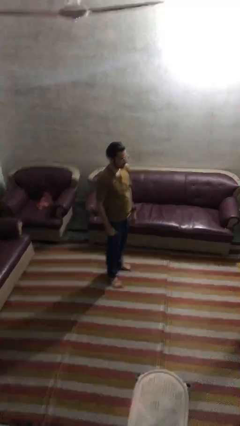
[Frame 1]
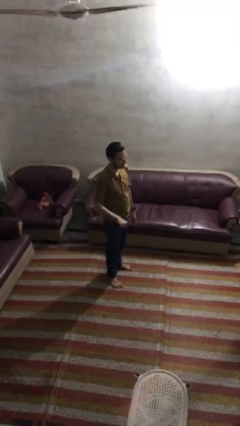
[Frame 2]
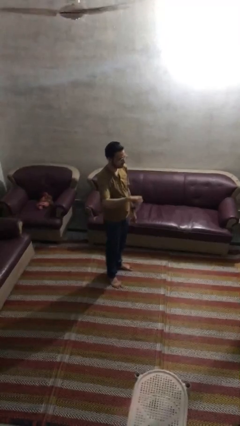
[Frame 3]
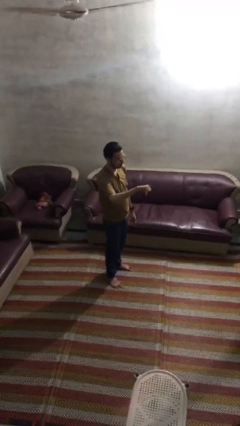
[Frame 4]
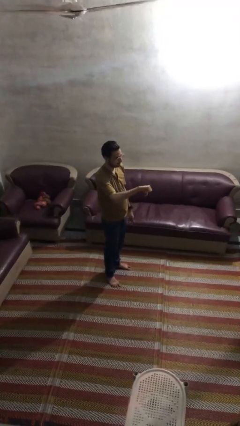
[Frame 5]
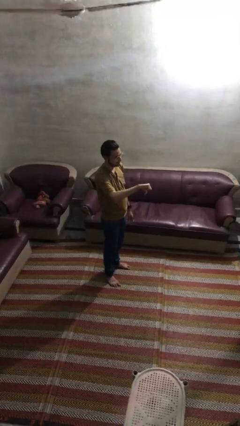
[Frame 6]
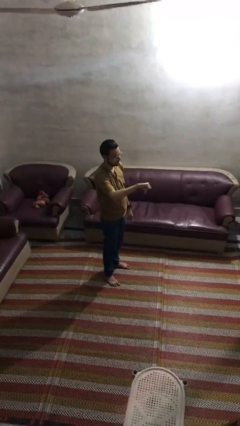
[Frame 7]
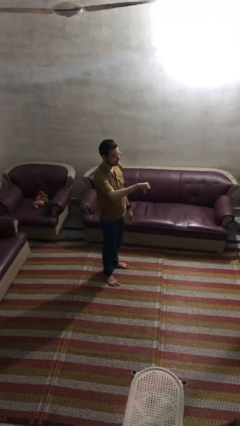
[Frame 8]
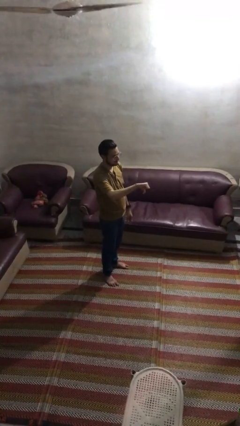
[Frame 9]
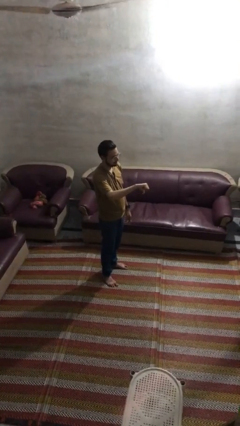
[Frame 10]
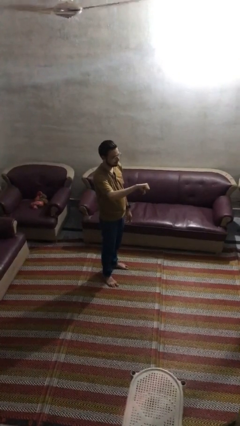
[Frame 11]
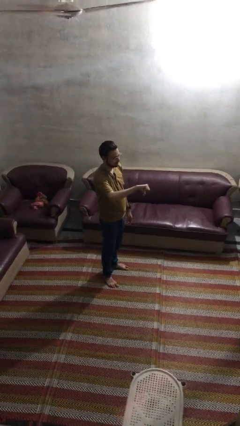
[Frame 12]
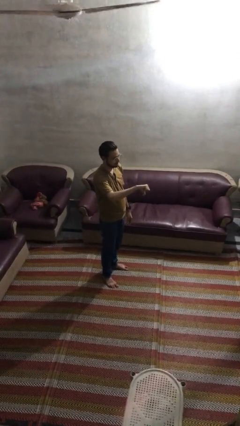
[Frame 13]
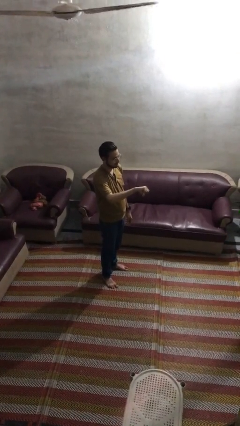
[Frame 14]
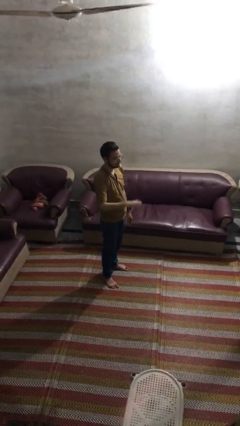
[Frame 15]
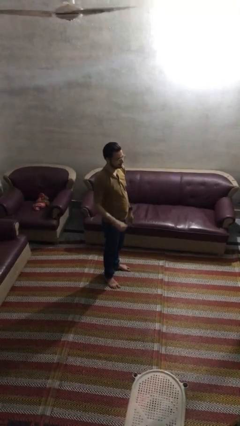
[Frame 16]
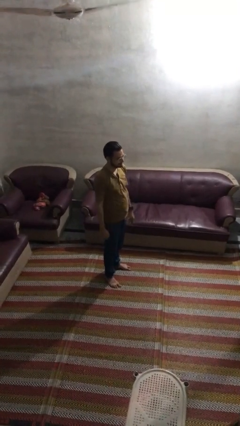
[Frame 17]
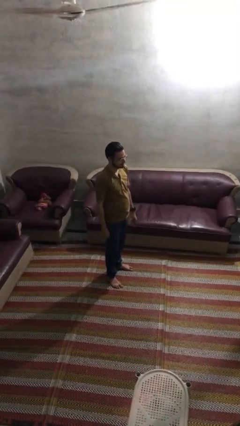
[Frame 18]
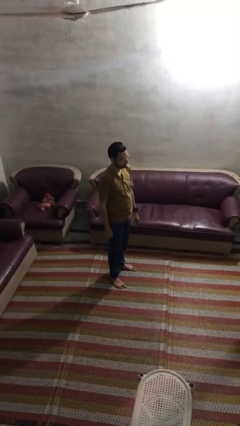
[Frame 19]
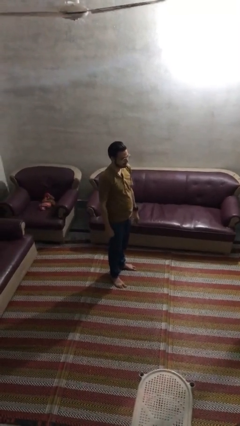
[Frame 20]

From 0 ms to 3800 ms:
person gestures thumbs down

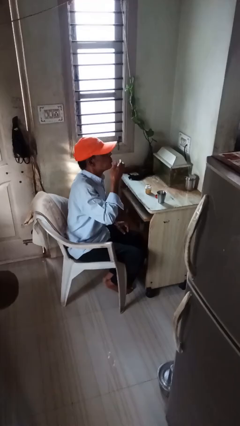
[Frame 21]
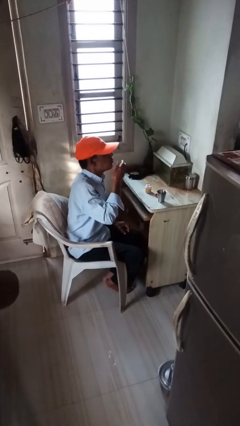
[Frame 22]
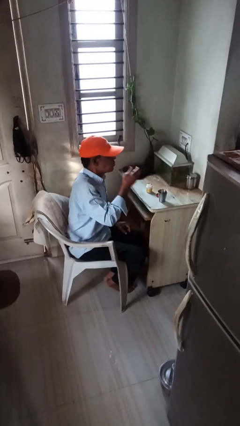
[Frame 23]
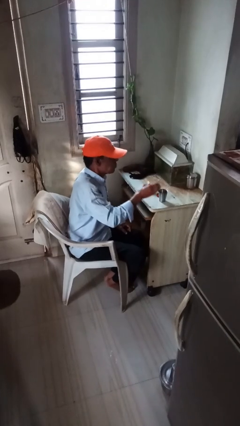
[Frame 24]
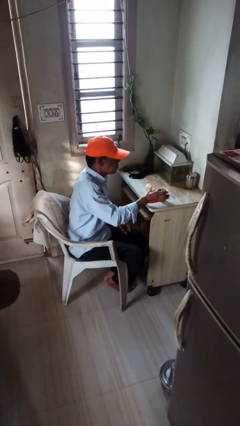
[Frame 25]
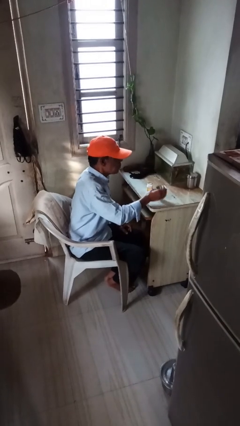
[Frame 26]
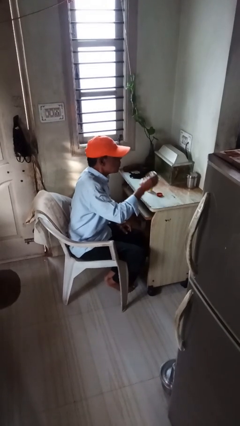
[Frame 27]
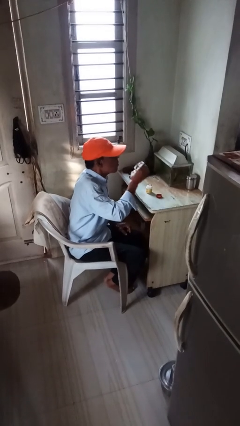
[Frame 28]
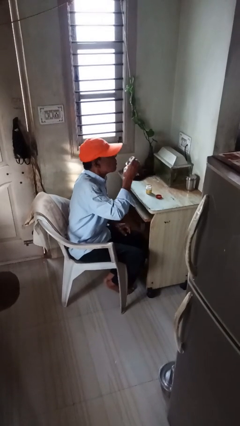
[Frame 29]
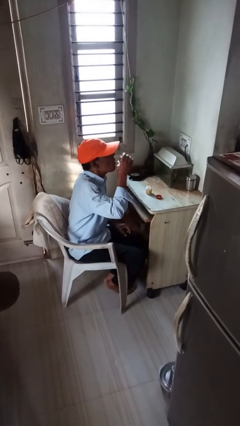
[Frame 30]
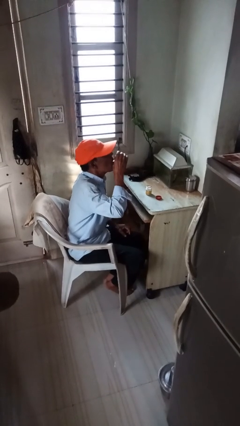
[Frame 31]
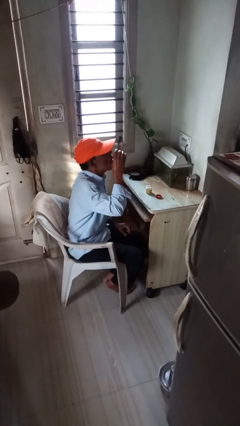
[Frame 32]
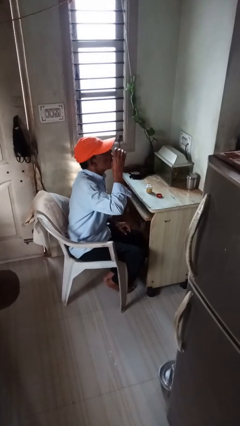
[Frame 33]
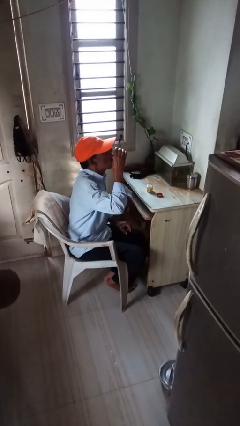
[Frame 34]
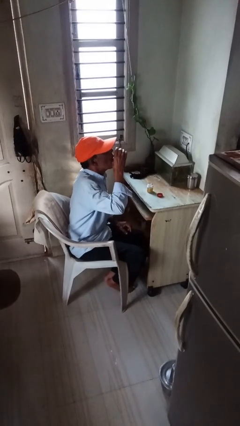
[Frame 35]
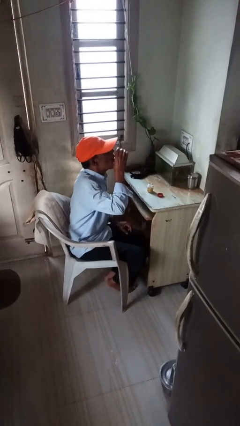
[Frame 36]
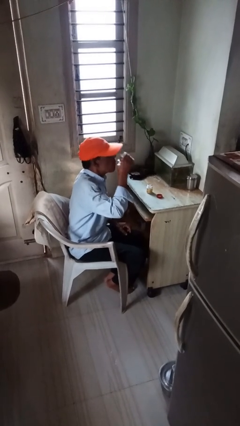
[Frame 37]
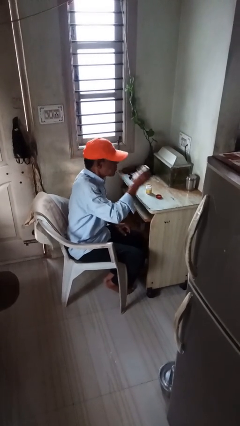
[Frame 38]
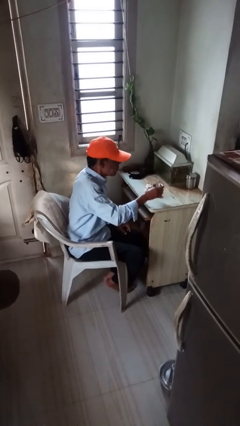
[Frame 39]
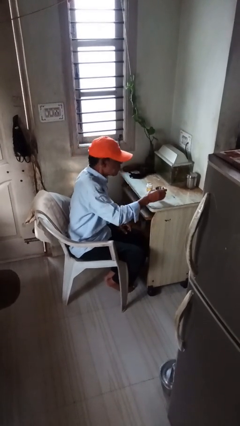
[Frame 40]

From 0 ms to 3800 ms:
person drinks from cup

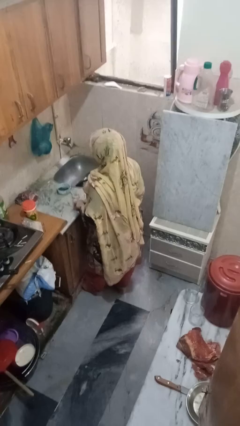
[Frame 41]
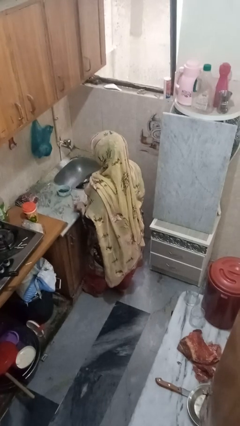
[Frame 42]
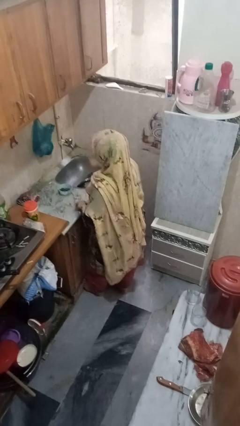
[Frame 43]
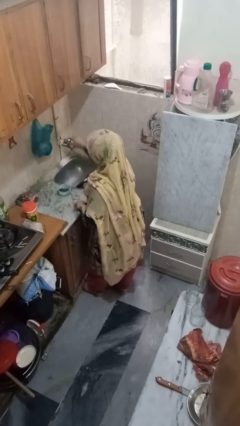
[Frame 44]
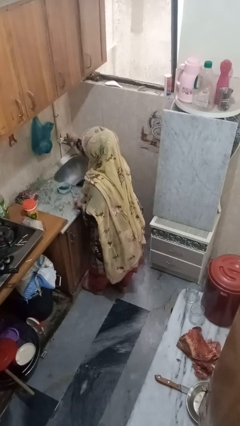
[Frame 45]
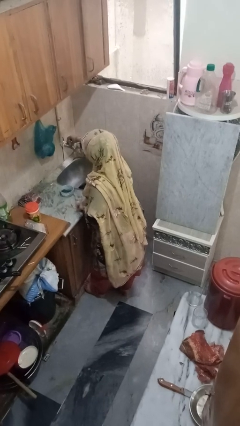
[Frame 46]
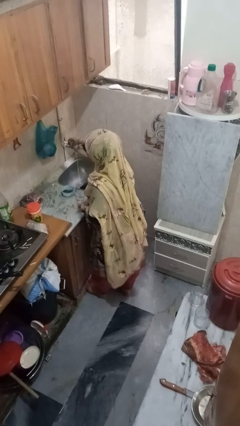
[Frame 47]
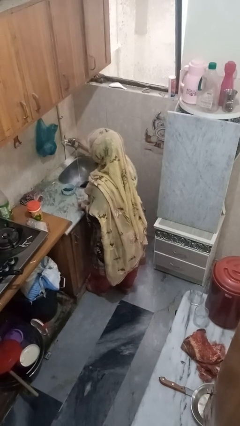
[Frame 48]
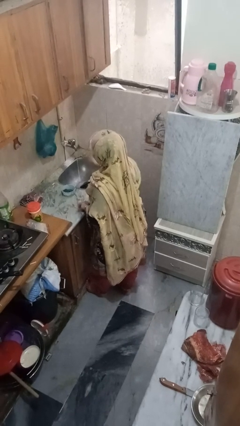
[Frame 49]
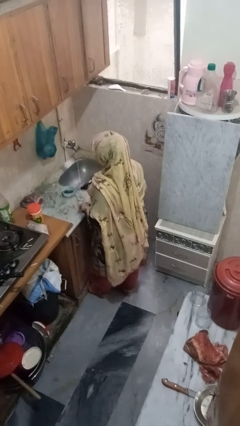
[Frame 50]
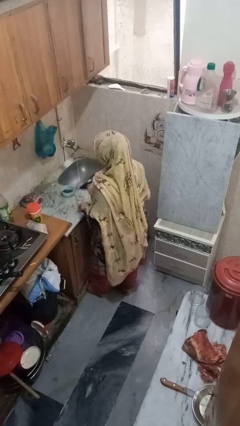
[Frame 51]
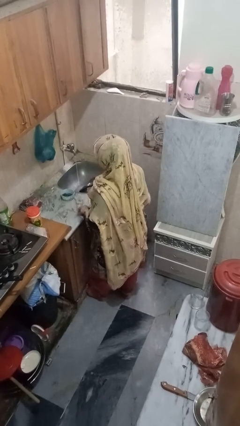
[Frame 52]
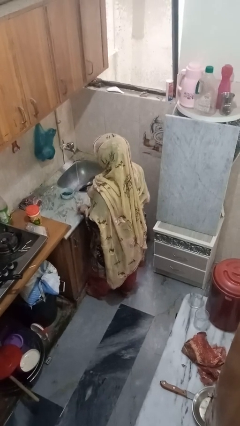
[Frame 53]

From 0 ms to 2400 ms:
person turns on faucet

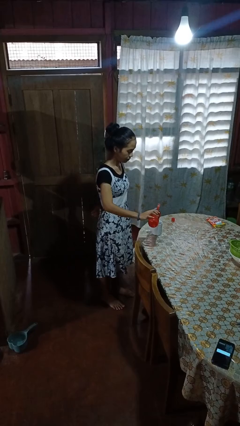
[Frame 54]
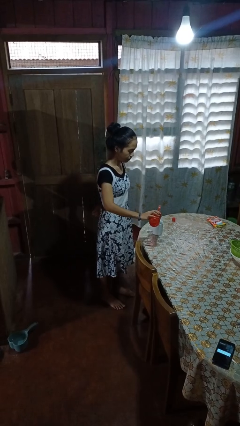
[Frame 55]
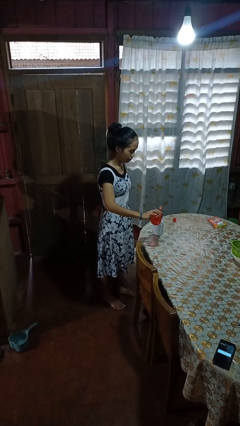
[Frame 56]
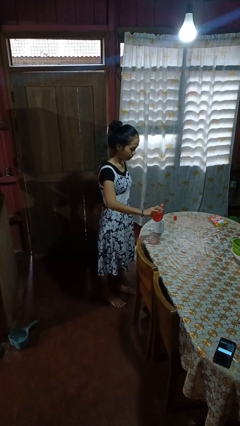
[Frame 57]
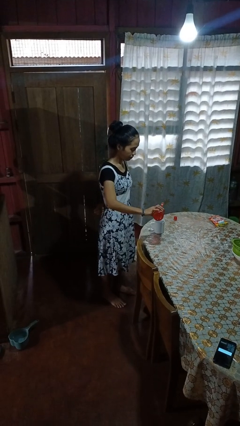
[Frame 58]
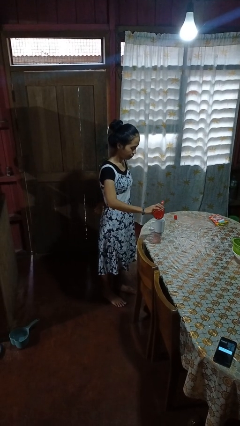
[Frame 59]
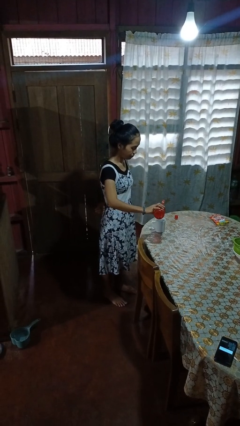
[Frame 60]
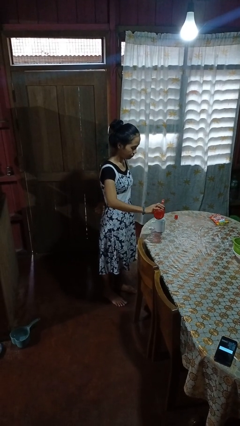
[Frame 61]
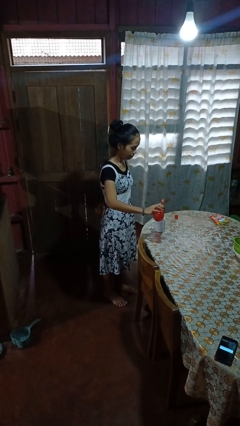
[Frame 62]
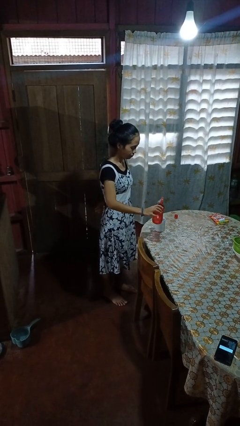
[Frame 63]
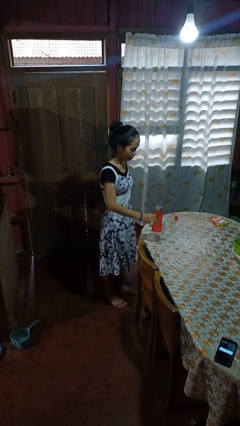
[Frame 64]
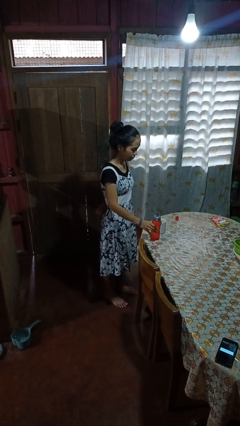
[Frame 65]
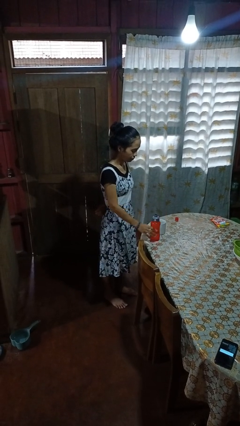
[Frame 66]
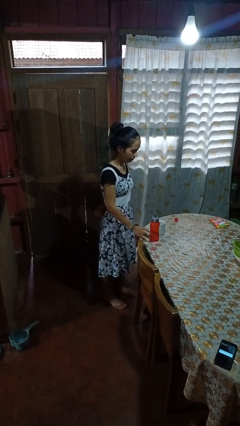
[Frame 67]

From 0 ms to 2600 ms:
person pours liquid into cup

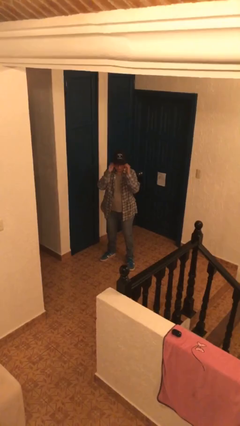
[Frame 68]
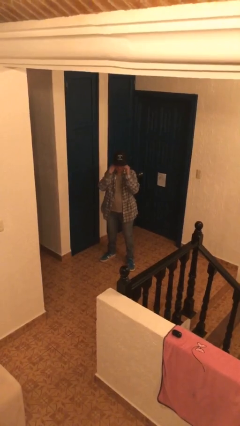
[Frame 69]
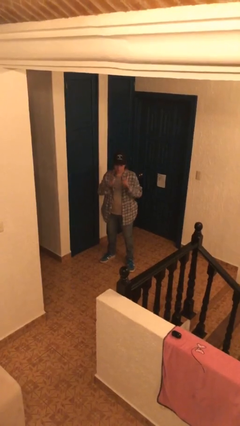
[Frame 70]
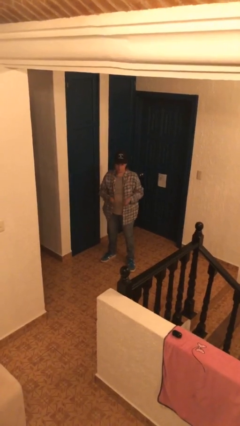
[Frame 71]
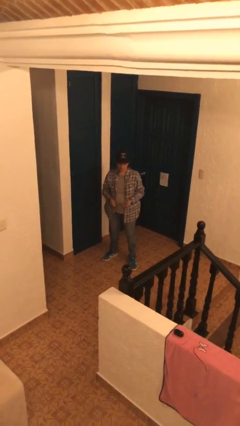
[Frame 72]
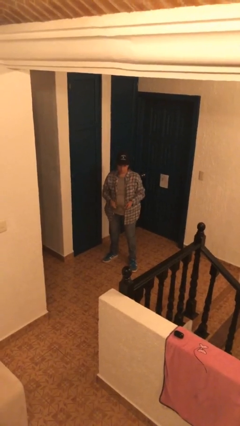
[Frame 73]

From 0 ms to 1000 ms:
person takes off glasses

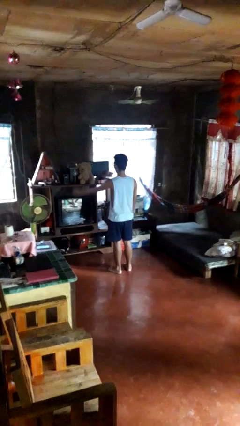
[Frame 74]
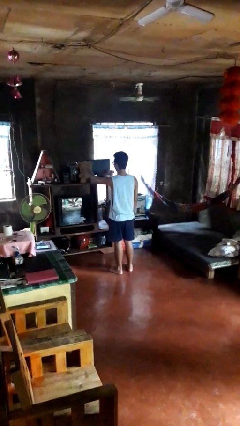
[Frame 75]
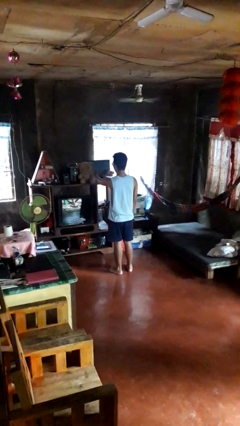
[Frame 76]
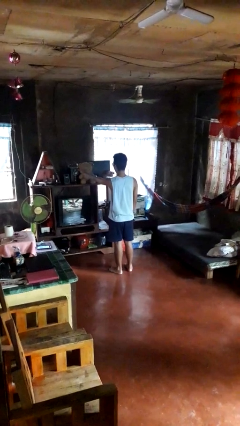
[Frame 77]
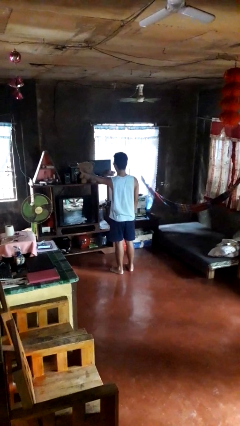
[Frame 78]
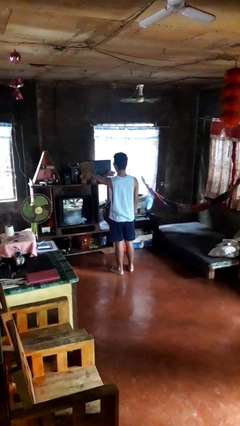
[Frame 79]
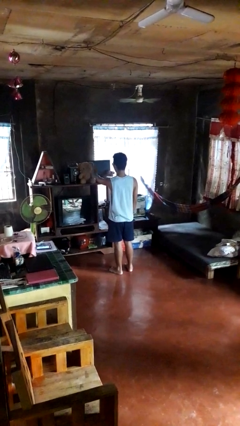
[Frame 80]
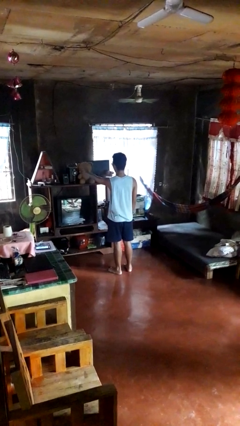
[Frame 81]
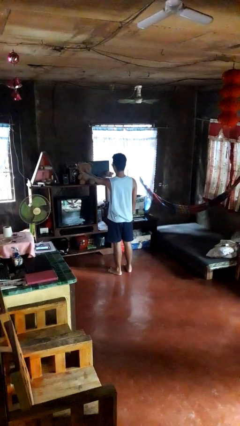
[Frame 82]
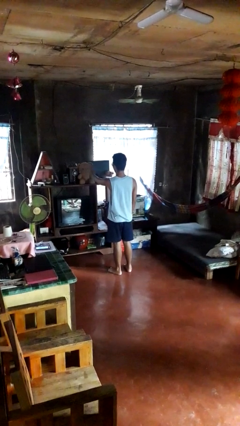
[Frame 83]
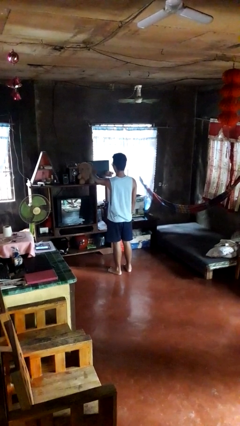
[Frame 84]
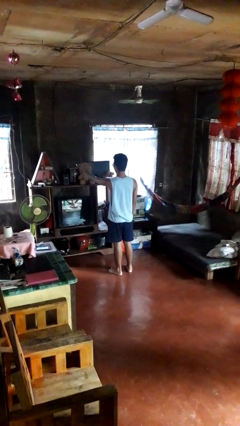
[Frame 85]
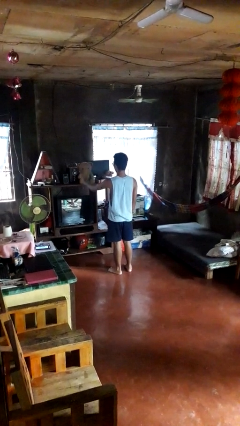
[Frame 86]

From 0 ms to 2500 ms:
person waves hand over object

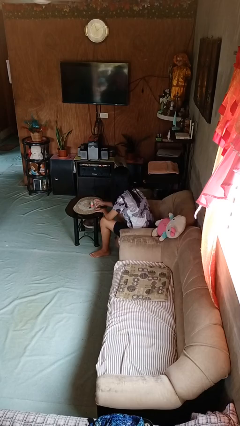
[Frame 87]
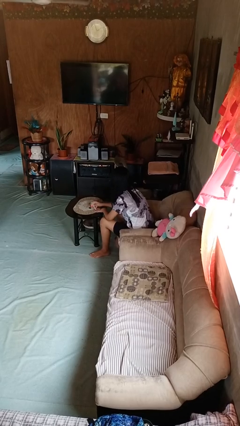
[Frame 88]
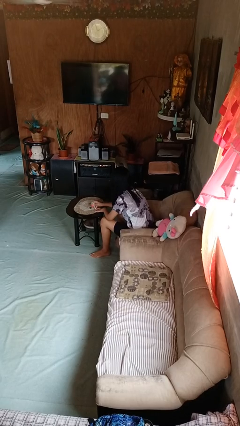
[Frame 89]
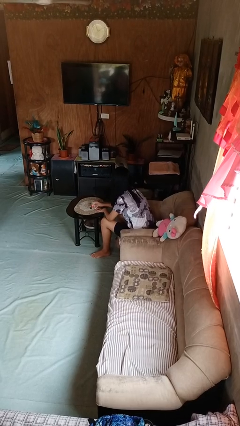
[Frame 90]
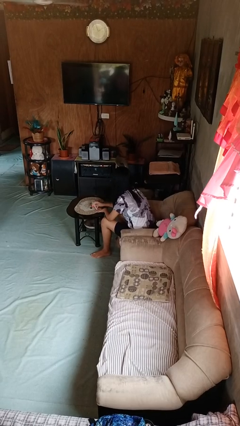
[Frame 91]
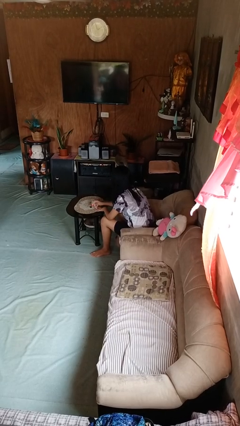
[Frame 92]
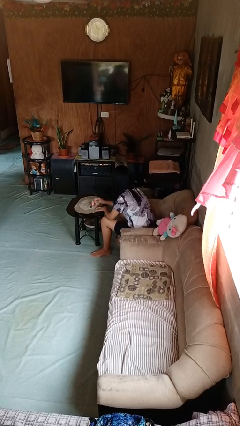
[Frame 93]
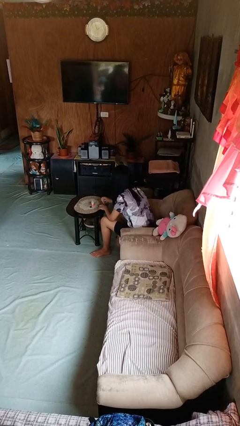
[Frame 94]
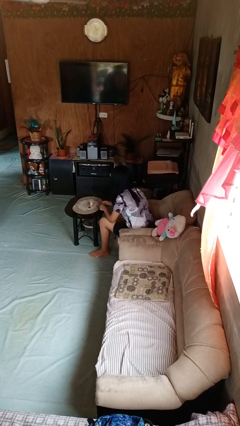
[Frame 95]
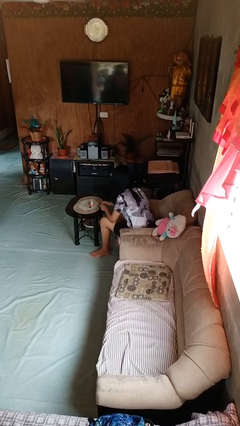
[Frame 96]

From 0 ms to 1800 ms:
person paints fingernails
